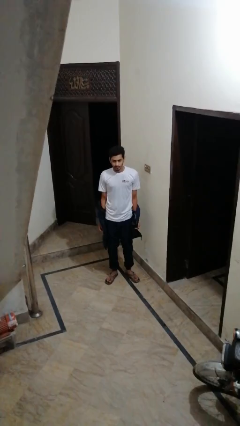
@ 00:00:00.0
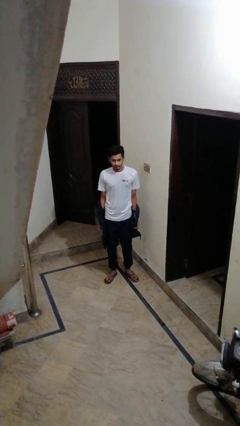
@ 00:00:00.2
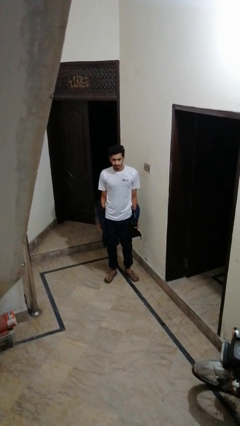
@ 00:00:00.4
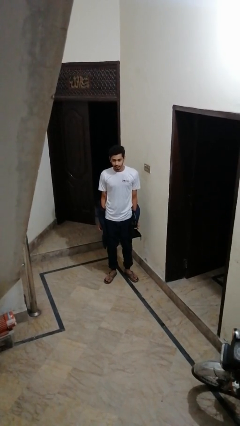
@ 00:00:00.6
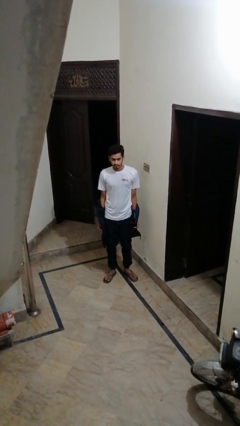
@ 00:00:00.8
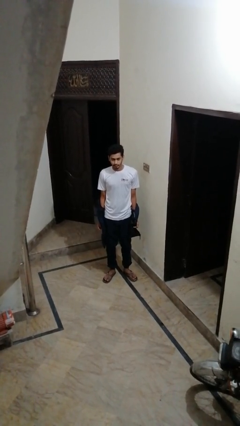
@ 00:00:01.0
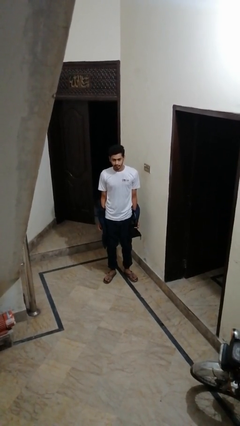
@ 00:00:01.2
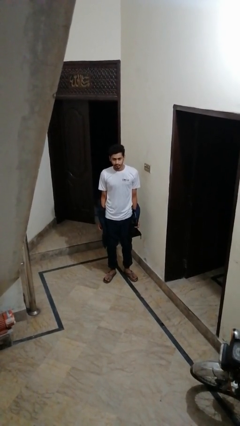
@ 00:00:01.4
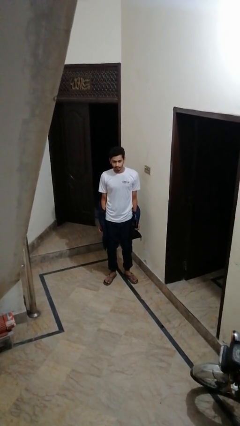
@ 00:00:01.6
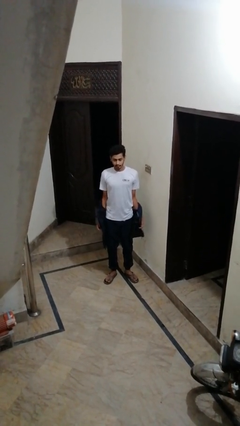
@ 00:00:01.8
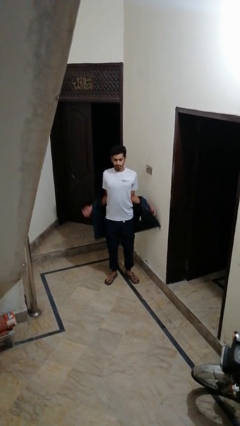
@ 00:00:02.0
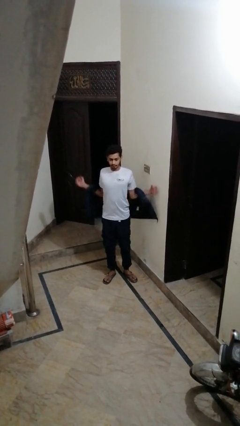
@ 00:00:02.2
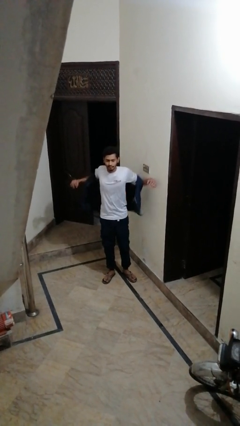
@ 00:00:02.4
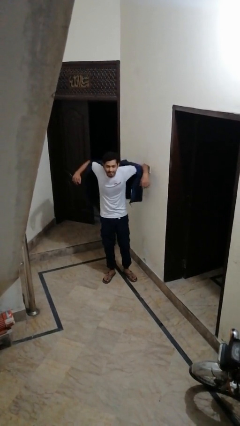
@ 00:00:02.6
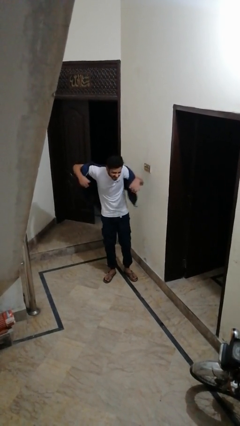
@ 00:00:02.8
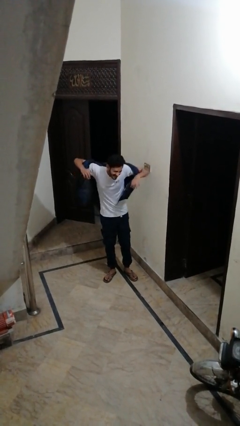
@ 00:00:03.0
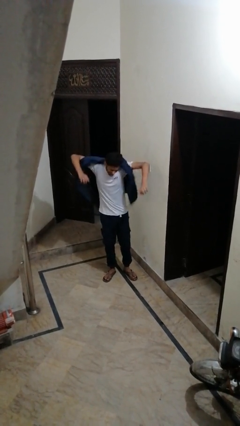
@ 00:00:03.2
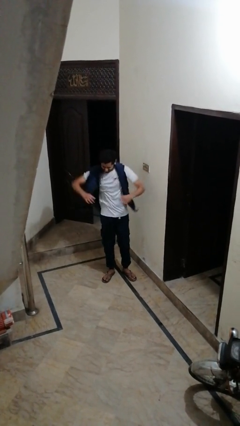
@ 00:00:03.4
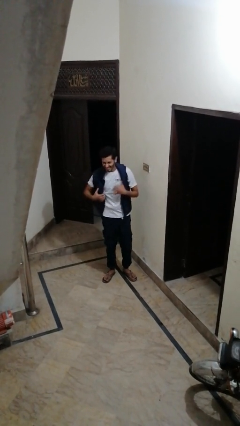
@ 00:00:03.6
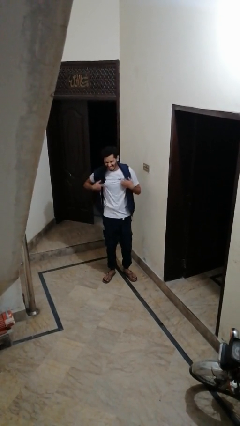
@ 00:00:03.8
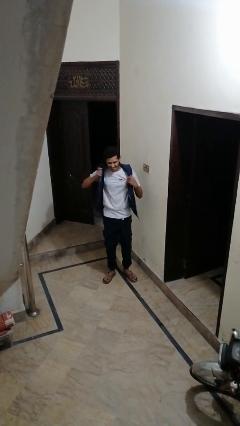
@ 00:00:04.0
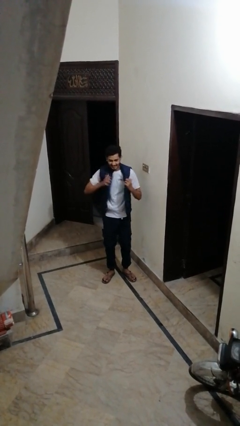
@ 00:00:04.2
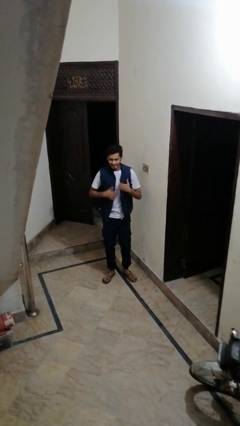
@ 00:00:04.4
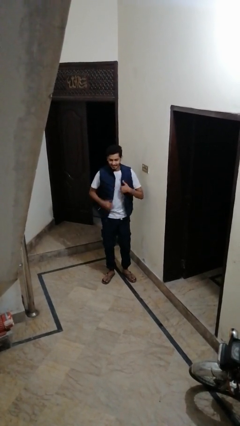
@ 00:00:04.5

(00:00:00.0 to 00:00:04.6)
person puts on jacket

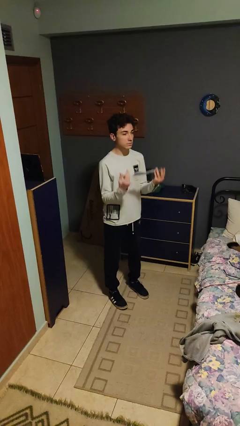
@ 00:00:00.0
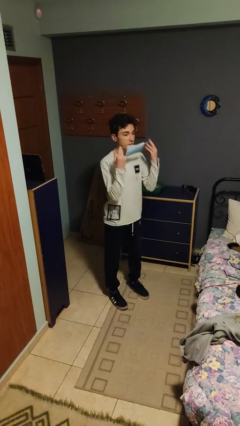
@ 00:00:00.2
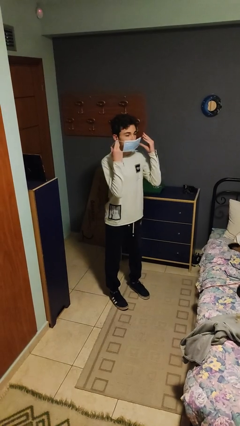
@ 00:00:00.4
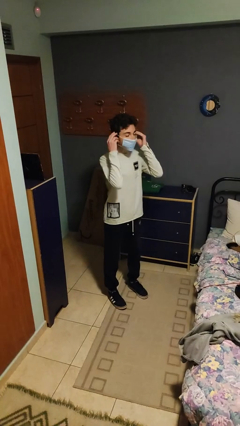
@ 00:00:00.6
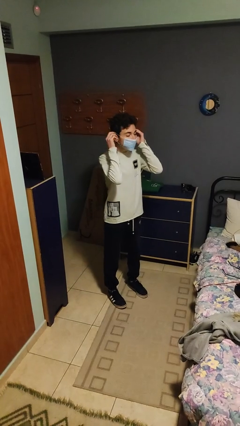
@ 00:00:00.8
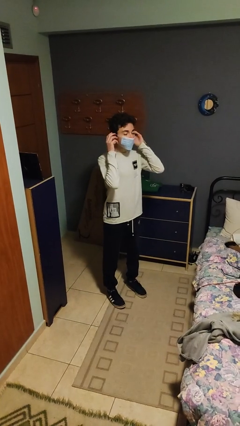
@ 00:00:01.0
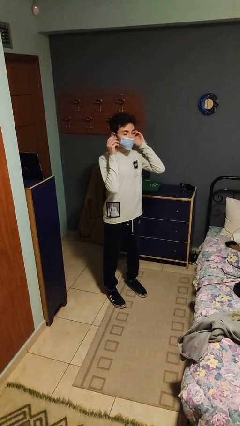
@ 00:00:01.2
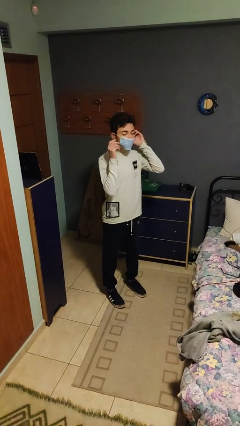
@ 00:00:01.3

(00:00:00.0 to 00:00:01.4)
person puts on facemask

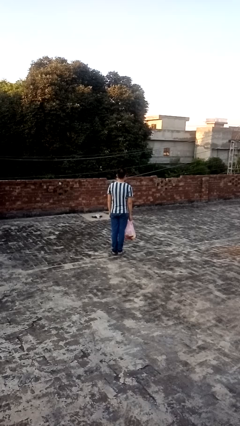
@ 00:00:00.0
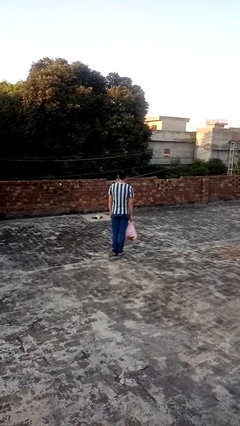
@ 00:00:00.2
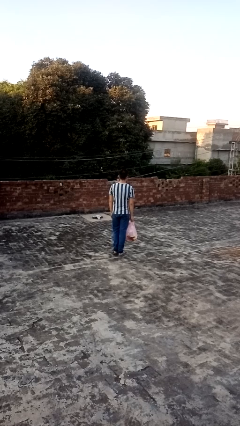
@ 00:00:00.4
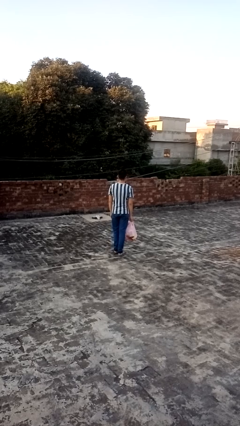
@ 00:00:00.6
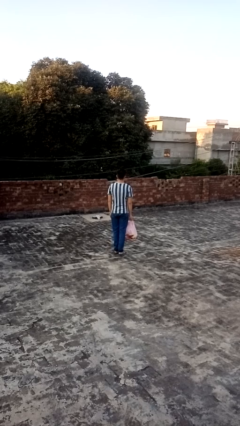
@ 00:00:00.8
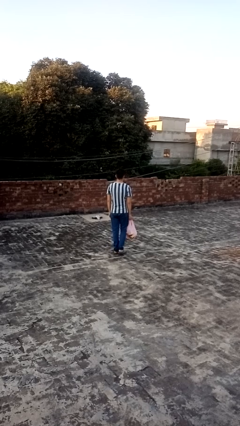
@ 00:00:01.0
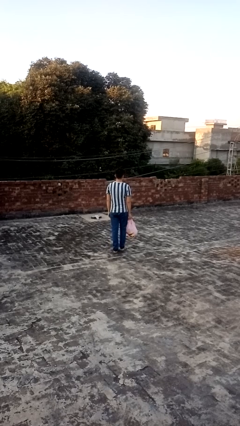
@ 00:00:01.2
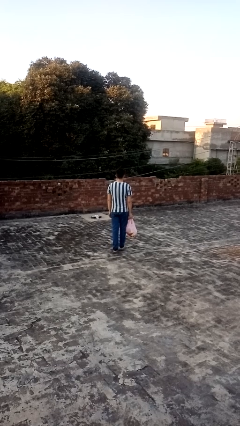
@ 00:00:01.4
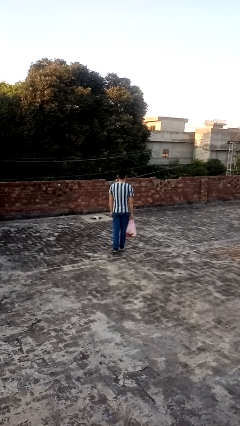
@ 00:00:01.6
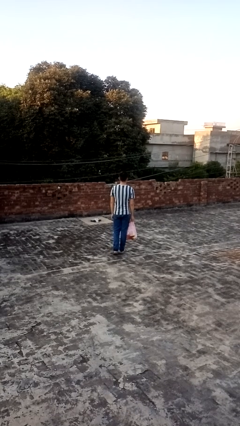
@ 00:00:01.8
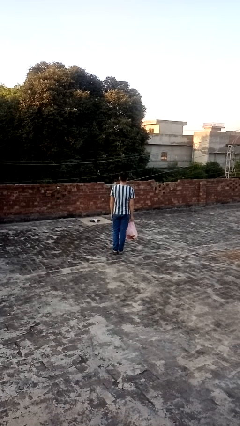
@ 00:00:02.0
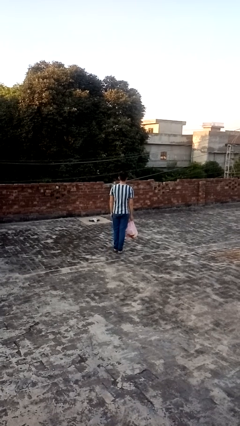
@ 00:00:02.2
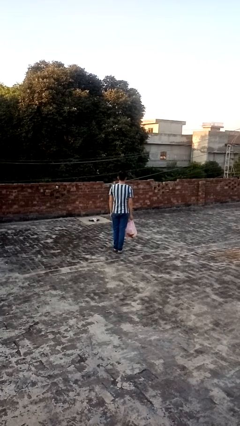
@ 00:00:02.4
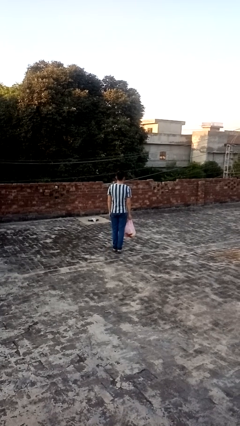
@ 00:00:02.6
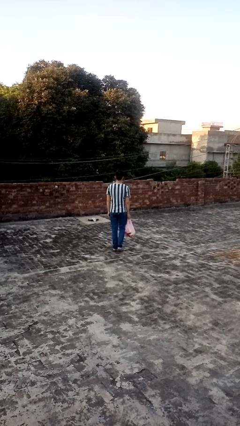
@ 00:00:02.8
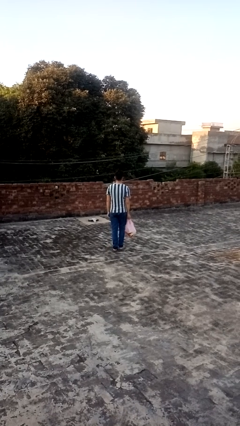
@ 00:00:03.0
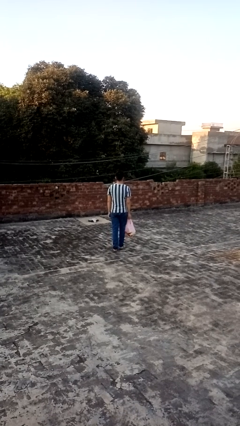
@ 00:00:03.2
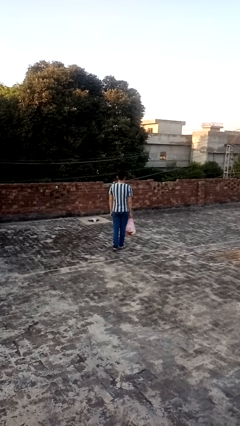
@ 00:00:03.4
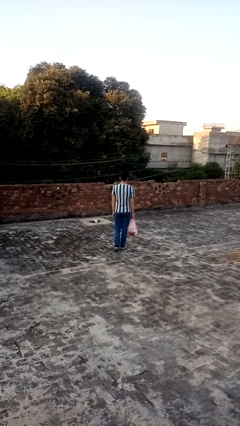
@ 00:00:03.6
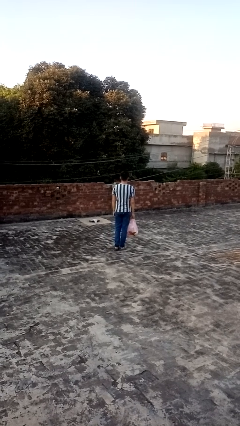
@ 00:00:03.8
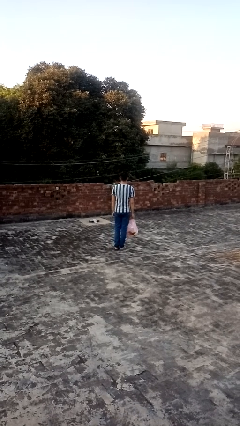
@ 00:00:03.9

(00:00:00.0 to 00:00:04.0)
person carries groceries

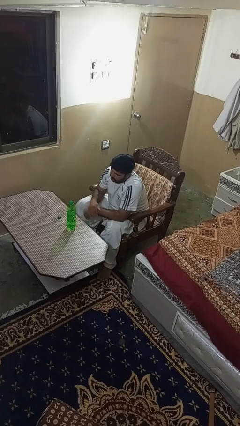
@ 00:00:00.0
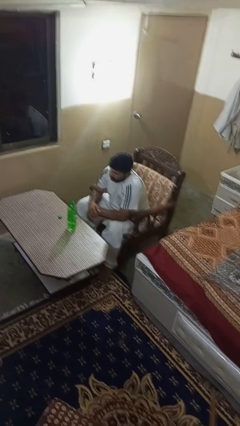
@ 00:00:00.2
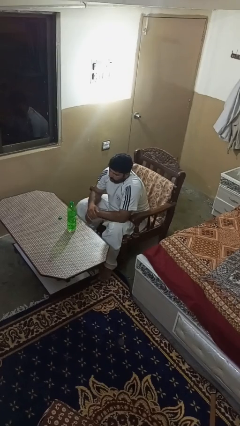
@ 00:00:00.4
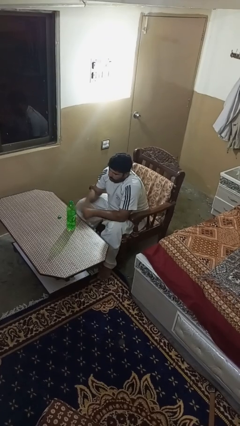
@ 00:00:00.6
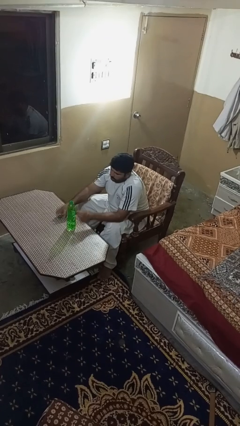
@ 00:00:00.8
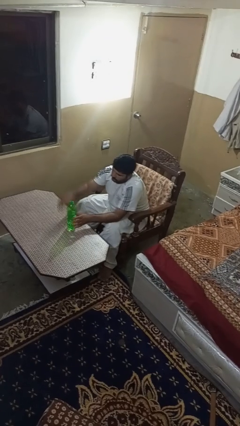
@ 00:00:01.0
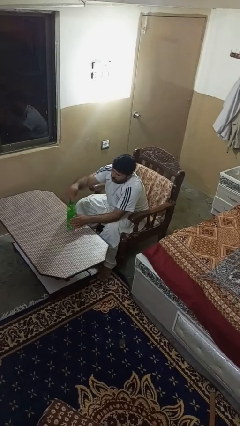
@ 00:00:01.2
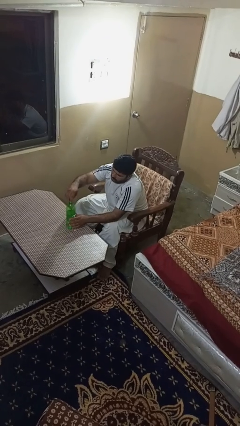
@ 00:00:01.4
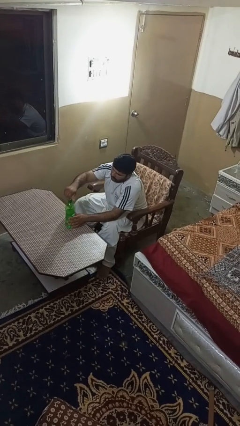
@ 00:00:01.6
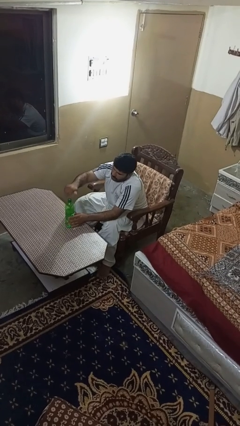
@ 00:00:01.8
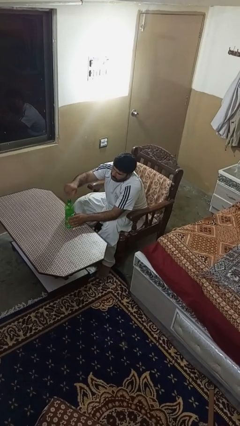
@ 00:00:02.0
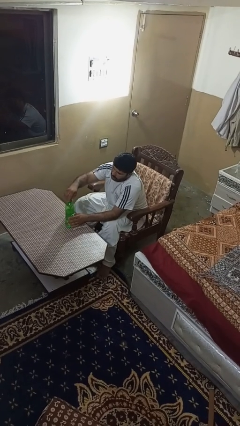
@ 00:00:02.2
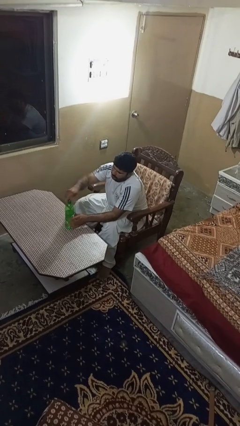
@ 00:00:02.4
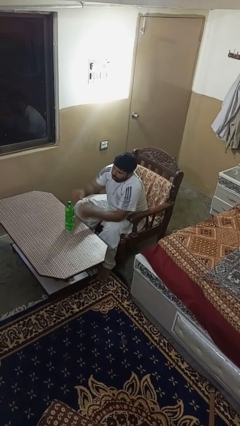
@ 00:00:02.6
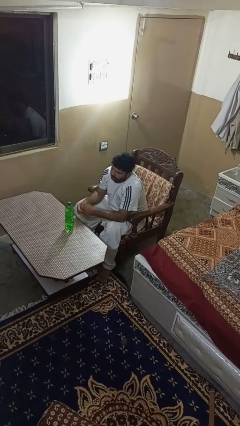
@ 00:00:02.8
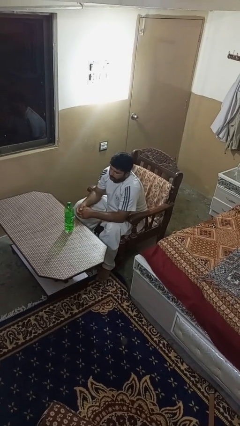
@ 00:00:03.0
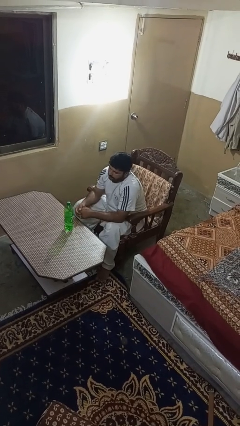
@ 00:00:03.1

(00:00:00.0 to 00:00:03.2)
person screws lid to bottle

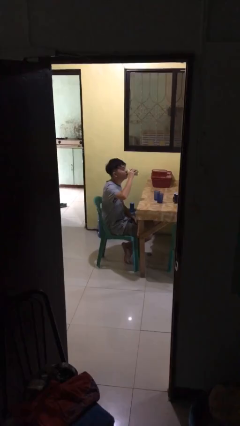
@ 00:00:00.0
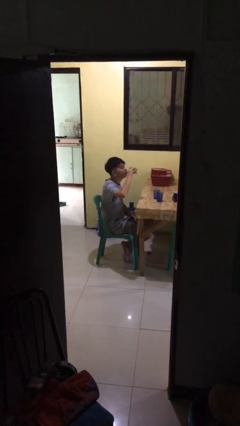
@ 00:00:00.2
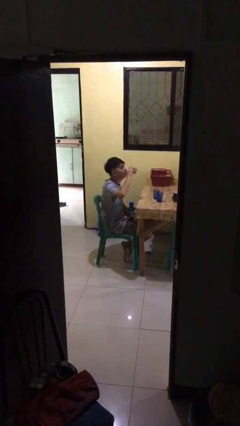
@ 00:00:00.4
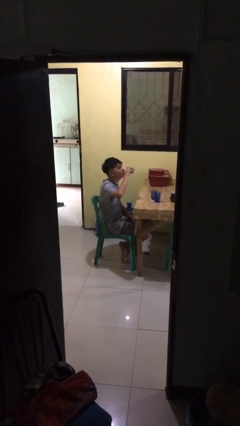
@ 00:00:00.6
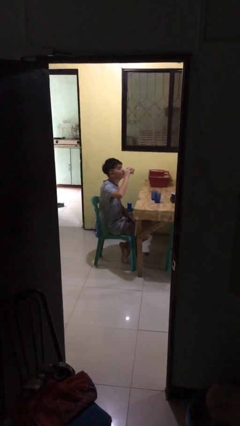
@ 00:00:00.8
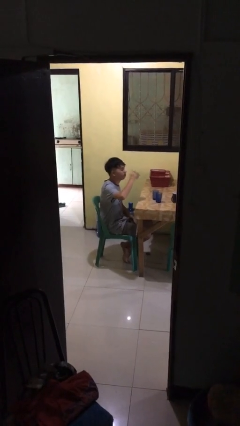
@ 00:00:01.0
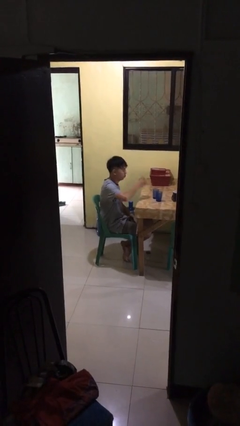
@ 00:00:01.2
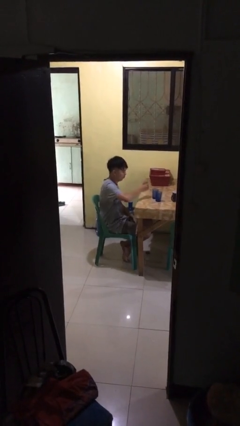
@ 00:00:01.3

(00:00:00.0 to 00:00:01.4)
person puts down object on table

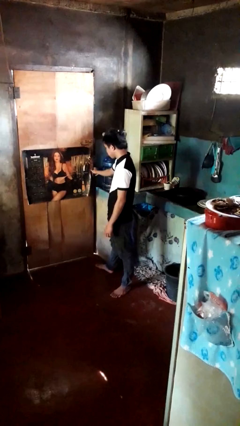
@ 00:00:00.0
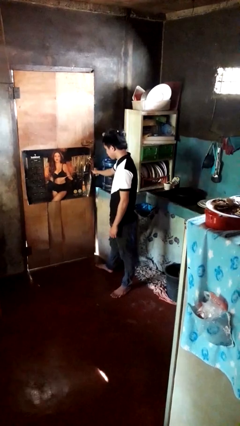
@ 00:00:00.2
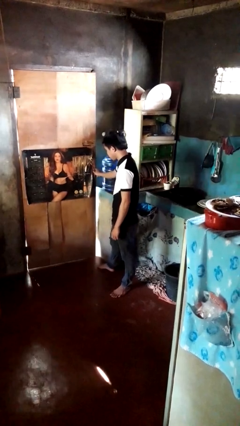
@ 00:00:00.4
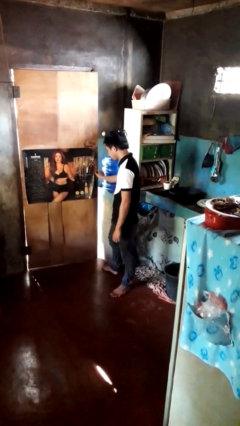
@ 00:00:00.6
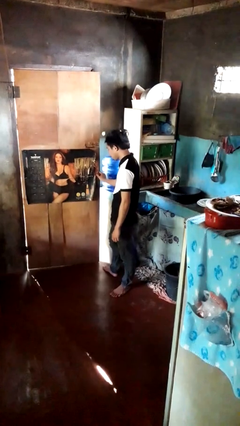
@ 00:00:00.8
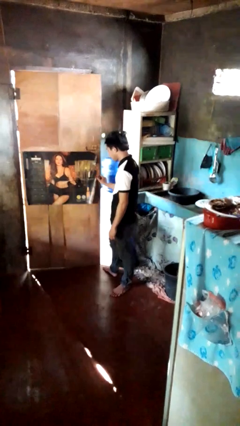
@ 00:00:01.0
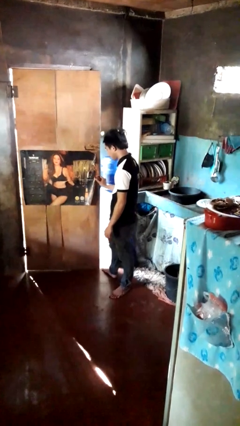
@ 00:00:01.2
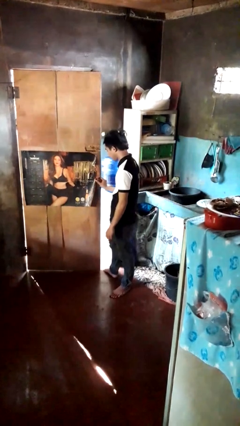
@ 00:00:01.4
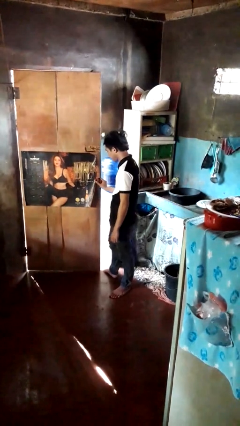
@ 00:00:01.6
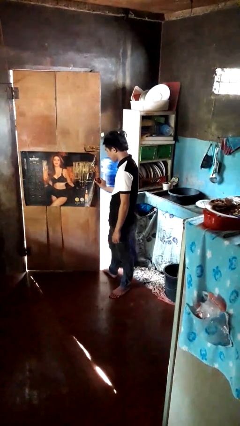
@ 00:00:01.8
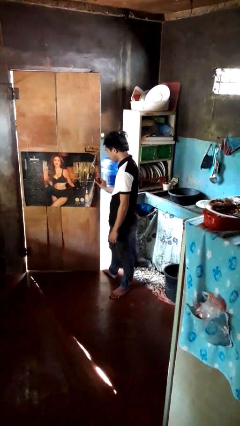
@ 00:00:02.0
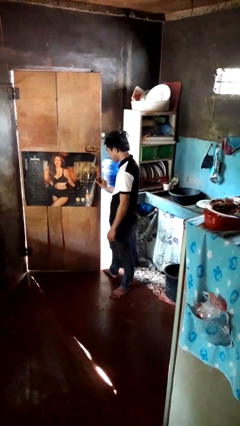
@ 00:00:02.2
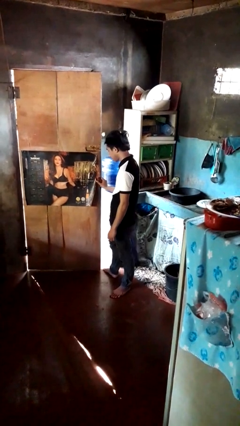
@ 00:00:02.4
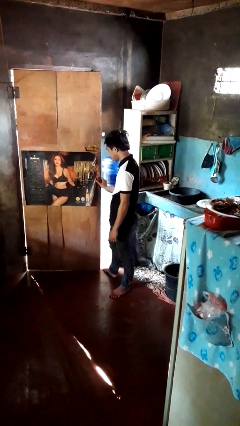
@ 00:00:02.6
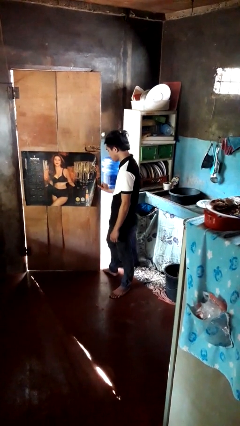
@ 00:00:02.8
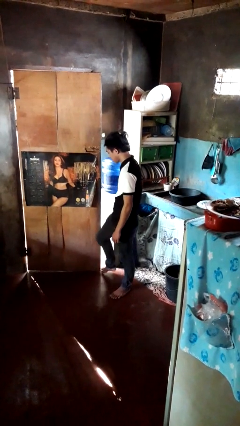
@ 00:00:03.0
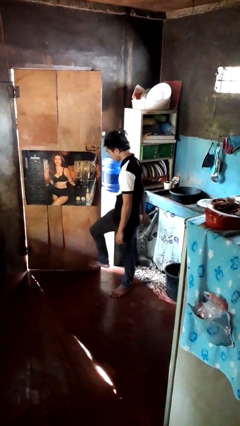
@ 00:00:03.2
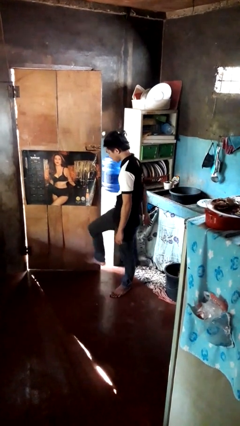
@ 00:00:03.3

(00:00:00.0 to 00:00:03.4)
person opens facility door
